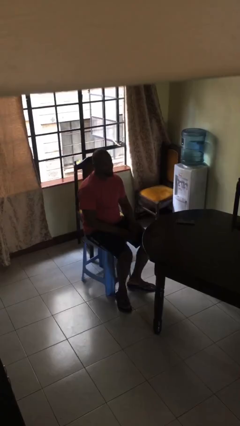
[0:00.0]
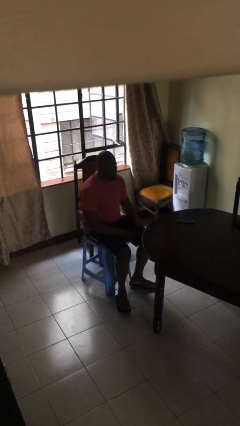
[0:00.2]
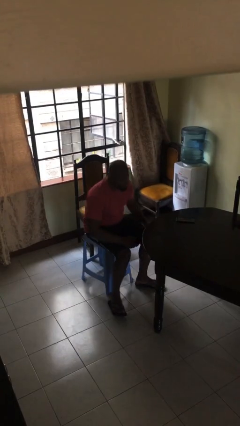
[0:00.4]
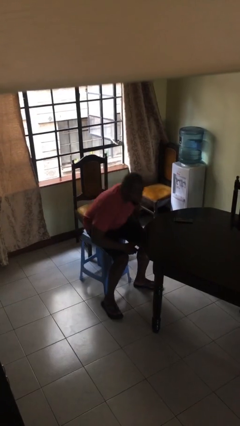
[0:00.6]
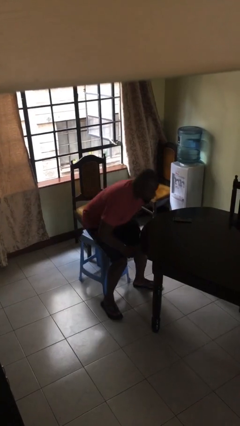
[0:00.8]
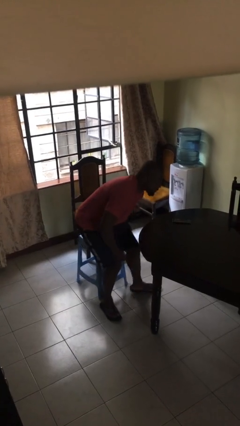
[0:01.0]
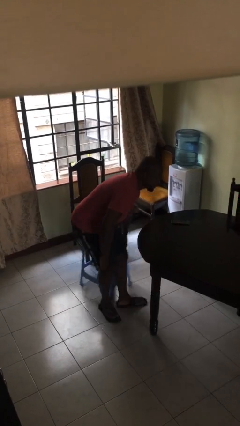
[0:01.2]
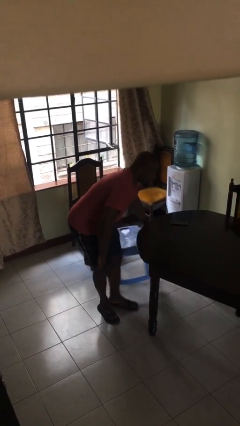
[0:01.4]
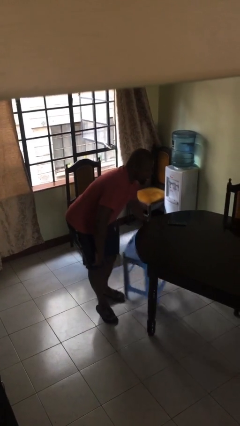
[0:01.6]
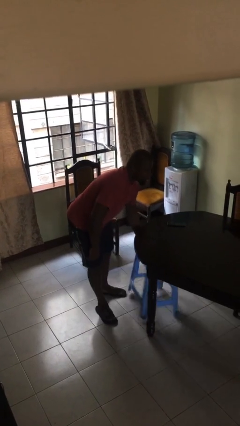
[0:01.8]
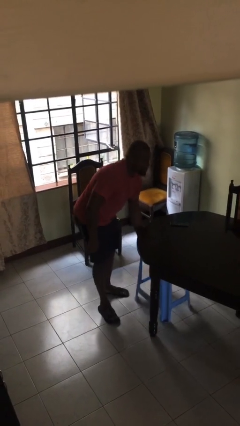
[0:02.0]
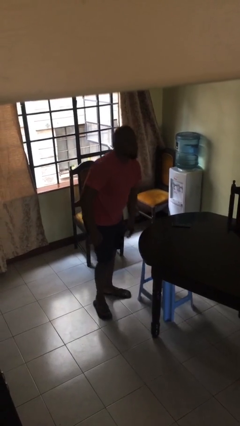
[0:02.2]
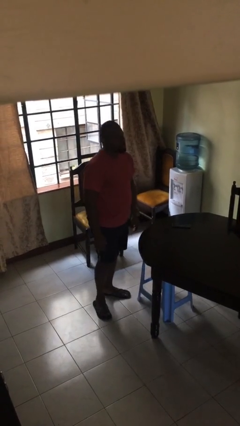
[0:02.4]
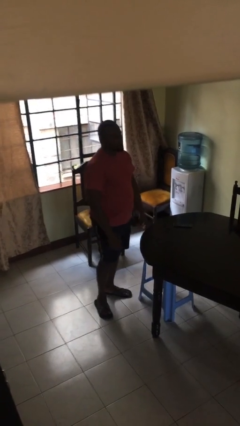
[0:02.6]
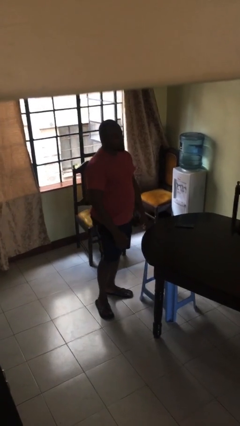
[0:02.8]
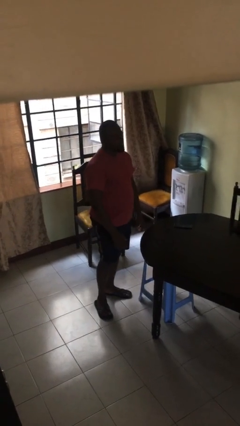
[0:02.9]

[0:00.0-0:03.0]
person stands up

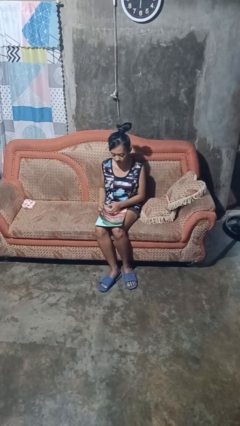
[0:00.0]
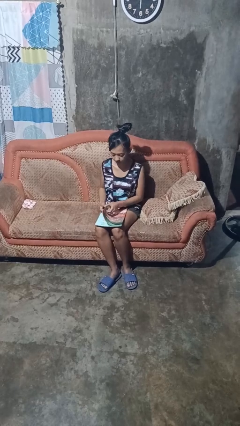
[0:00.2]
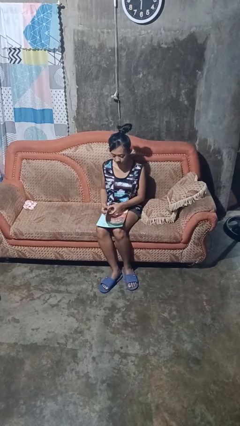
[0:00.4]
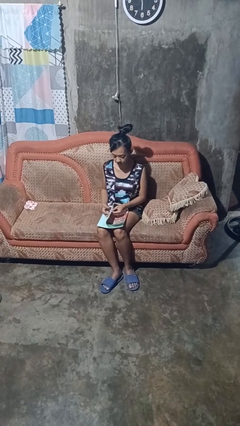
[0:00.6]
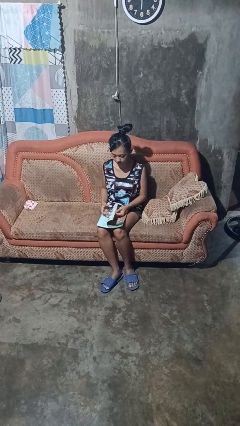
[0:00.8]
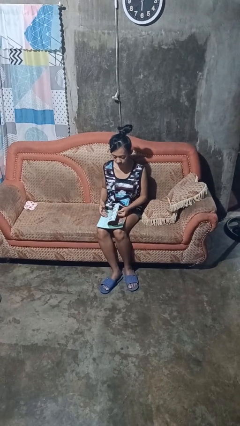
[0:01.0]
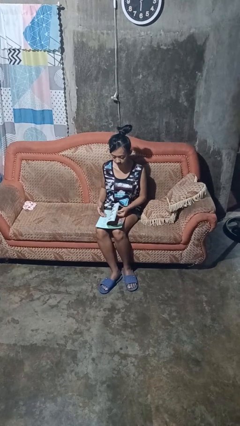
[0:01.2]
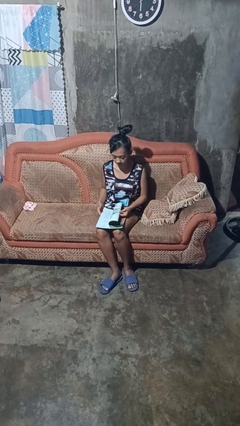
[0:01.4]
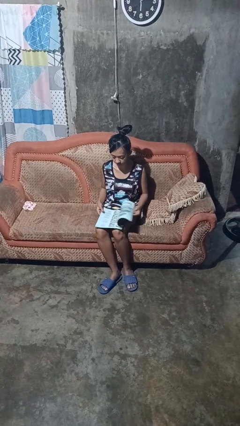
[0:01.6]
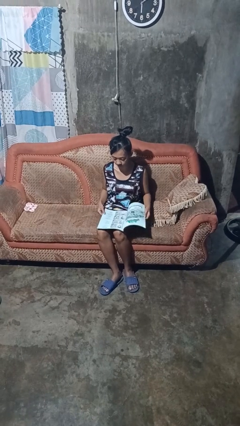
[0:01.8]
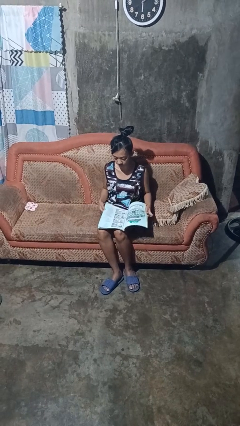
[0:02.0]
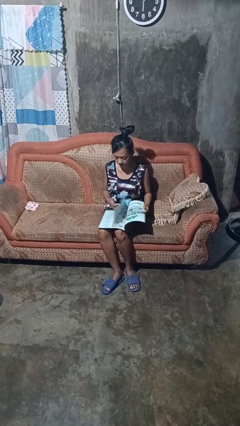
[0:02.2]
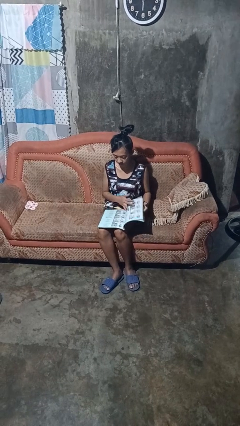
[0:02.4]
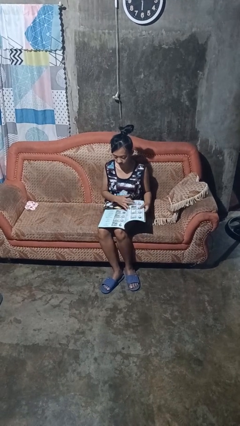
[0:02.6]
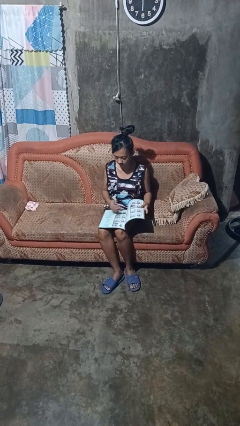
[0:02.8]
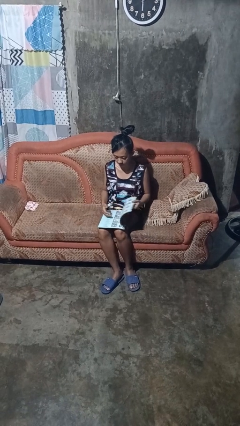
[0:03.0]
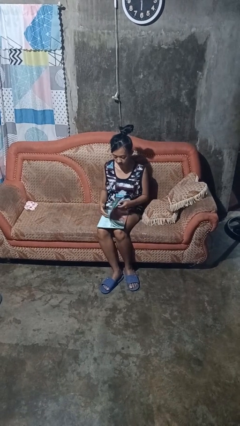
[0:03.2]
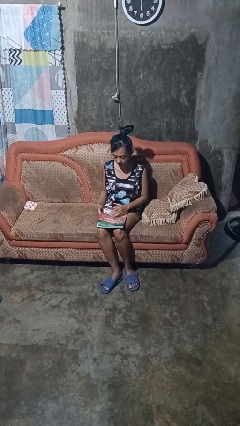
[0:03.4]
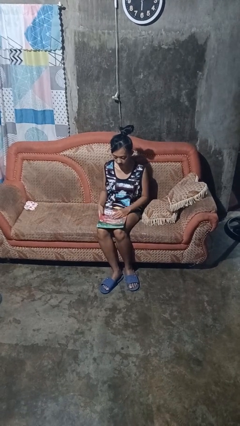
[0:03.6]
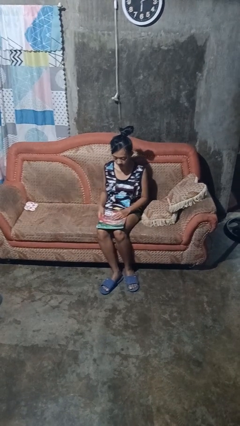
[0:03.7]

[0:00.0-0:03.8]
person reads magazine

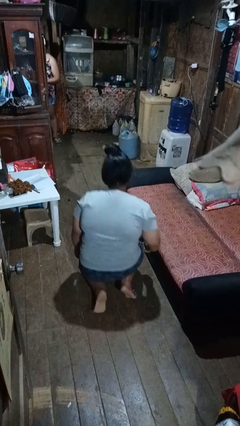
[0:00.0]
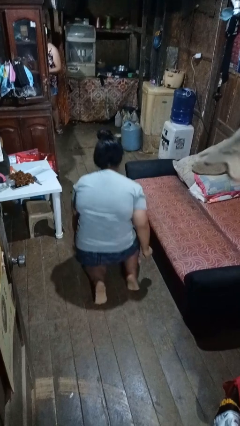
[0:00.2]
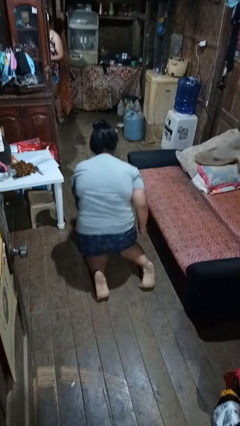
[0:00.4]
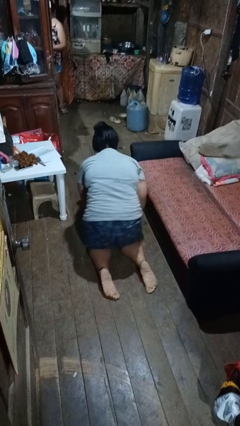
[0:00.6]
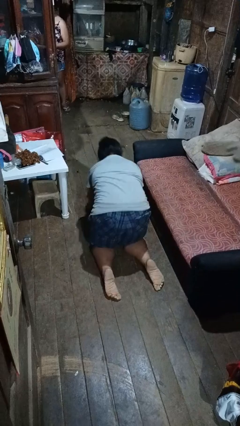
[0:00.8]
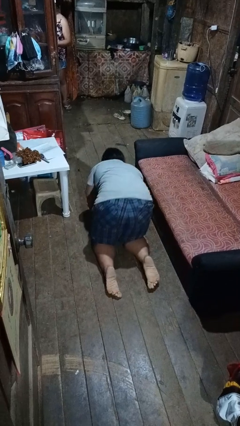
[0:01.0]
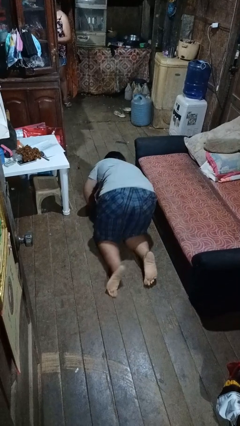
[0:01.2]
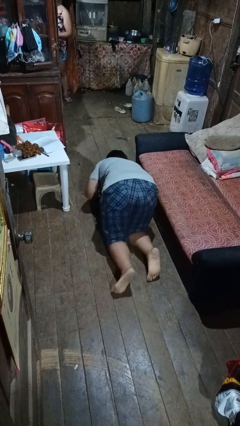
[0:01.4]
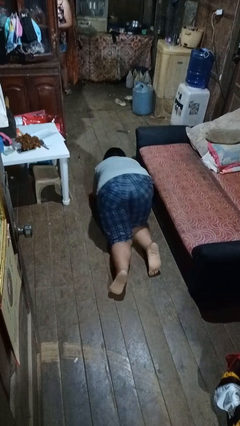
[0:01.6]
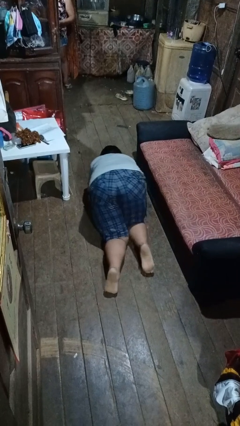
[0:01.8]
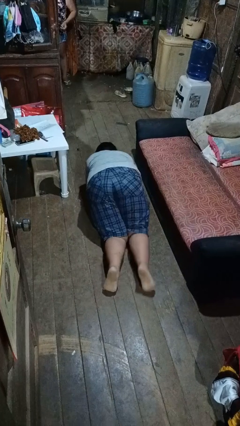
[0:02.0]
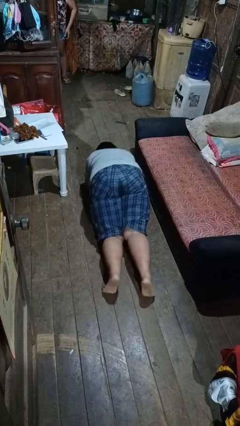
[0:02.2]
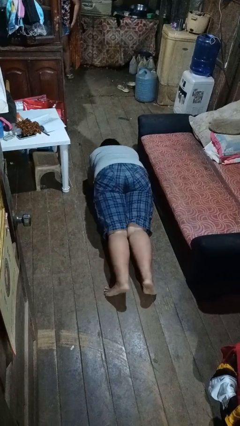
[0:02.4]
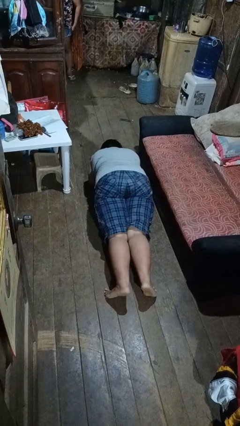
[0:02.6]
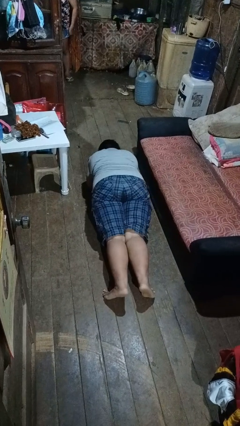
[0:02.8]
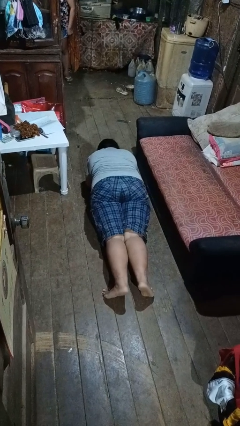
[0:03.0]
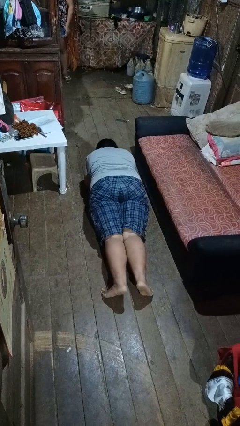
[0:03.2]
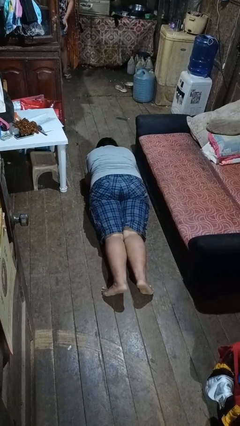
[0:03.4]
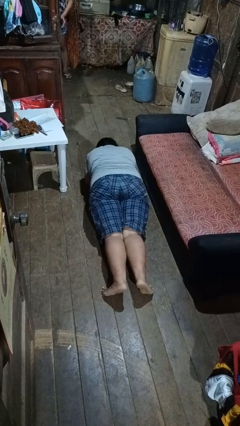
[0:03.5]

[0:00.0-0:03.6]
person exercises with plank

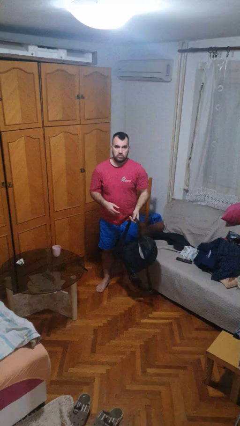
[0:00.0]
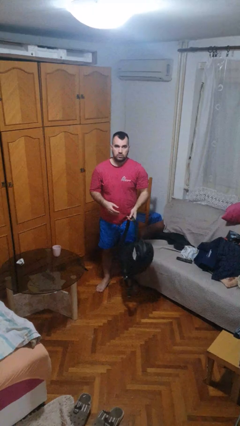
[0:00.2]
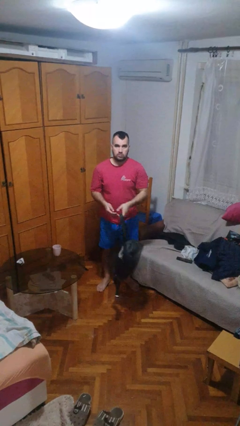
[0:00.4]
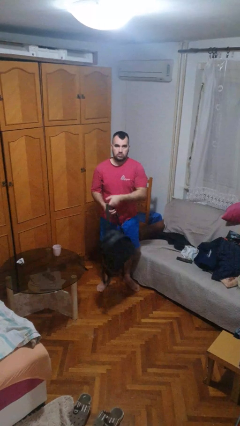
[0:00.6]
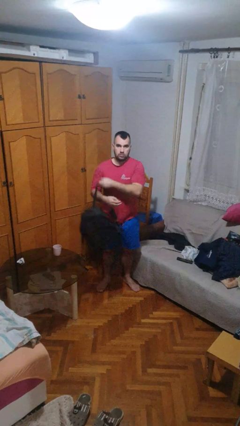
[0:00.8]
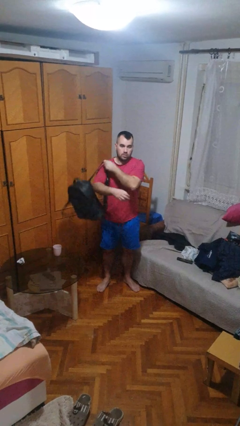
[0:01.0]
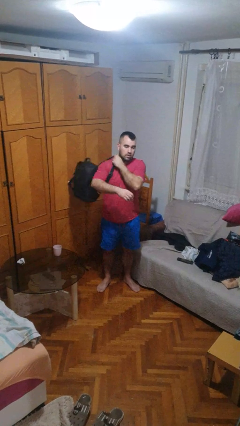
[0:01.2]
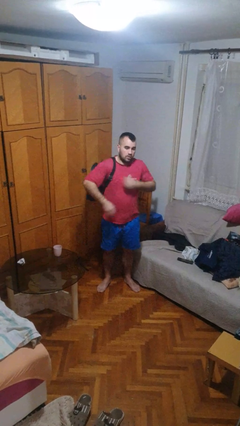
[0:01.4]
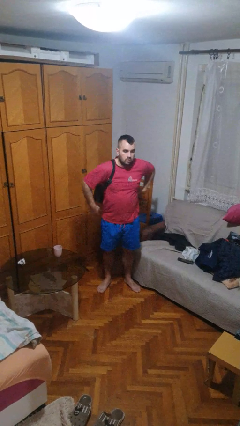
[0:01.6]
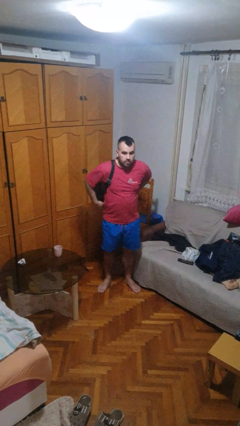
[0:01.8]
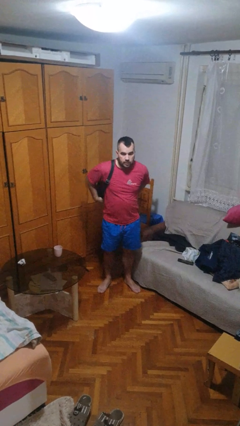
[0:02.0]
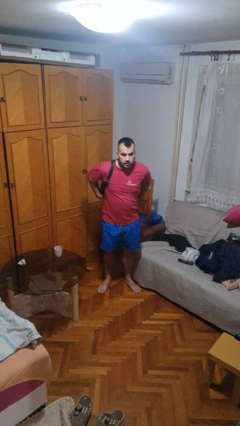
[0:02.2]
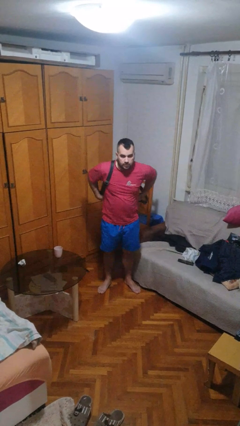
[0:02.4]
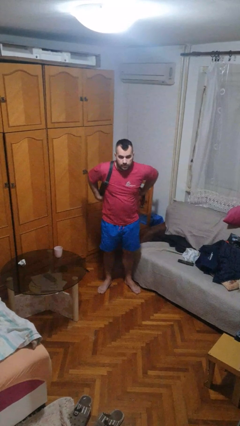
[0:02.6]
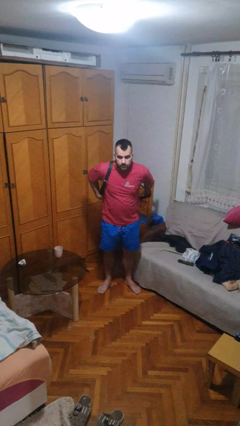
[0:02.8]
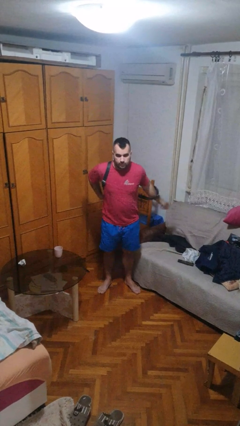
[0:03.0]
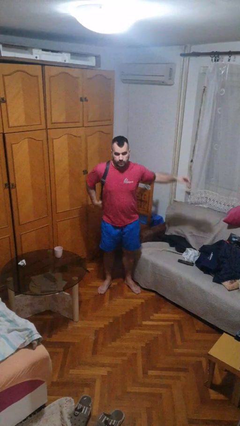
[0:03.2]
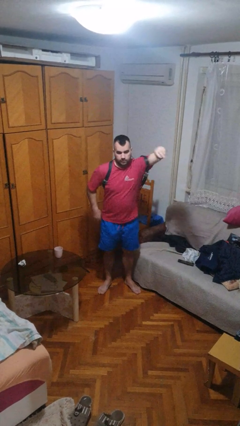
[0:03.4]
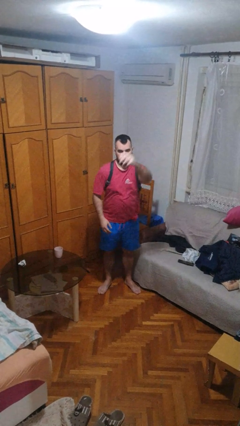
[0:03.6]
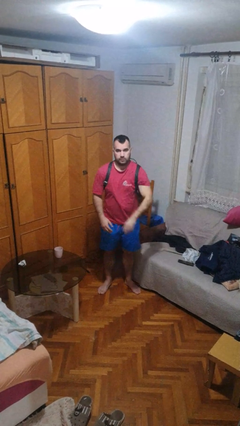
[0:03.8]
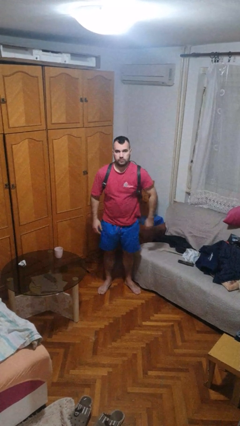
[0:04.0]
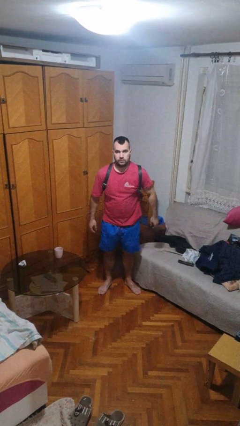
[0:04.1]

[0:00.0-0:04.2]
person puts on backpack

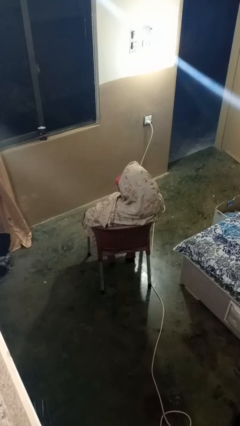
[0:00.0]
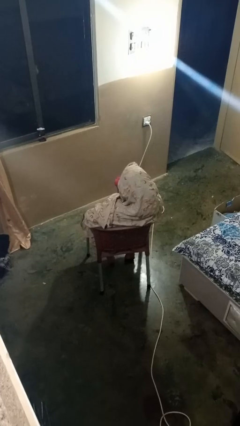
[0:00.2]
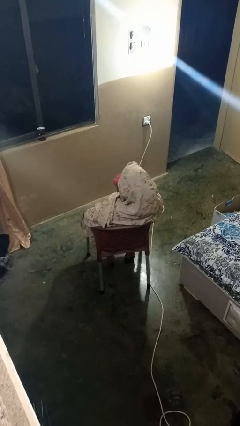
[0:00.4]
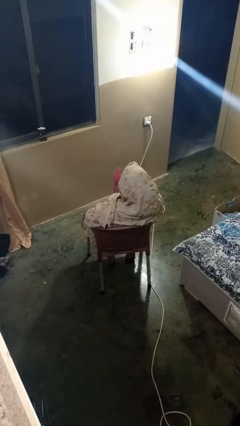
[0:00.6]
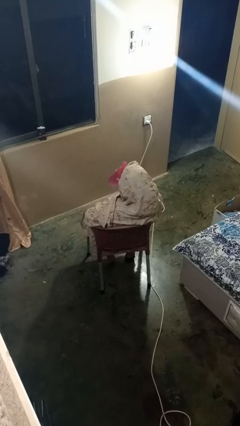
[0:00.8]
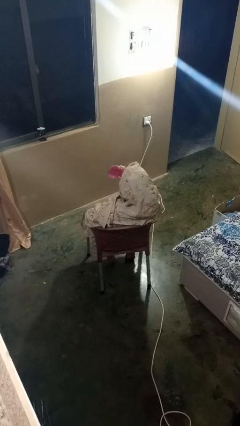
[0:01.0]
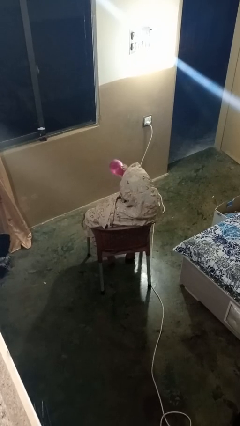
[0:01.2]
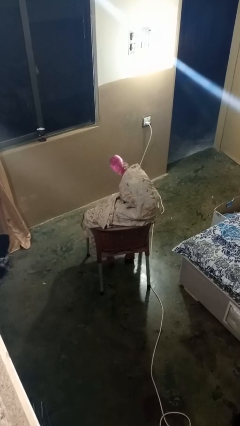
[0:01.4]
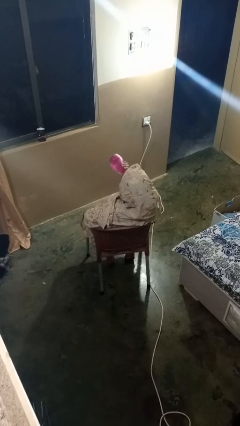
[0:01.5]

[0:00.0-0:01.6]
person drinks from bottle

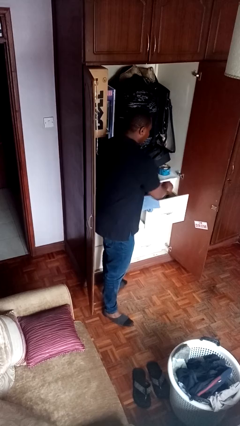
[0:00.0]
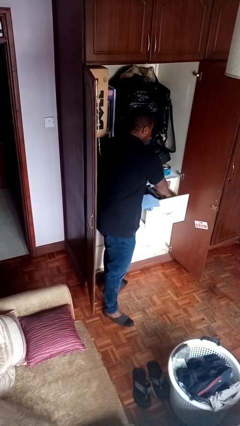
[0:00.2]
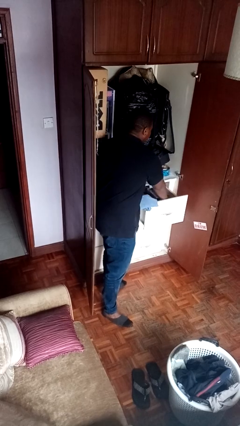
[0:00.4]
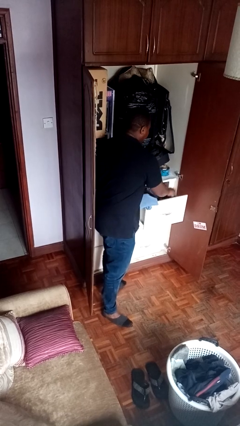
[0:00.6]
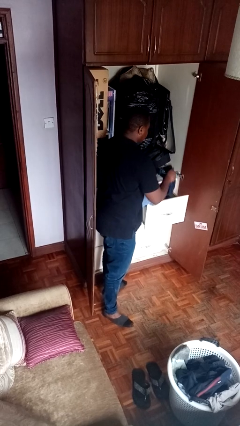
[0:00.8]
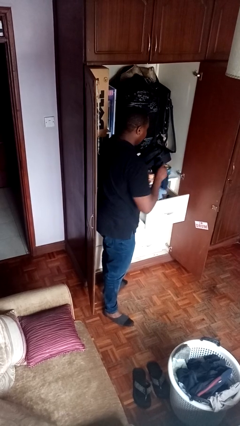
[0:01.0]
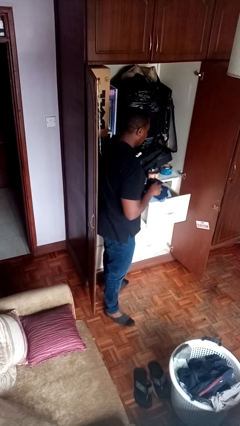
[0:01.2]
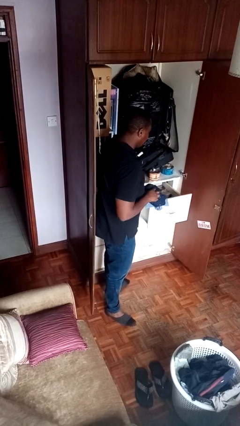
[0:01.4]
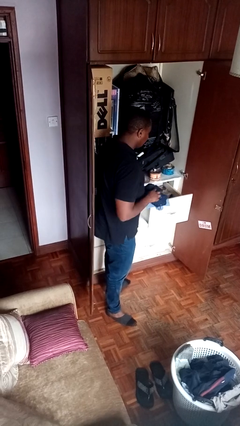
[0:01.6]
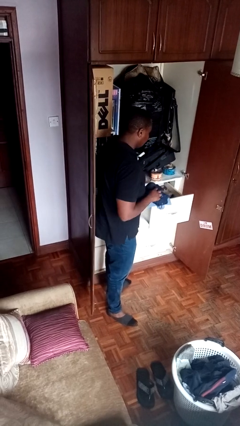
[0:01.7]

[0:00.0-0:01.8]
person takes clothes from dresser
